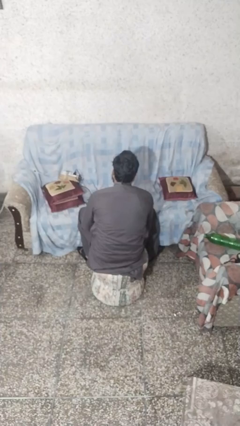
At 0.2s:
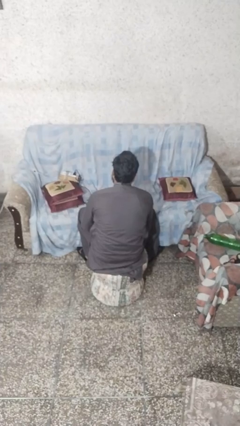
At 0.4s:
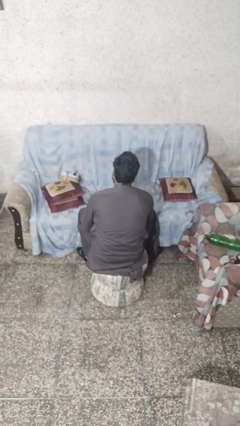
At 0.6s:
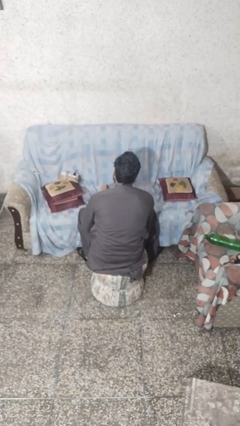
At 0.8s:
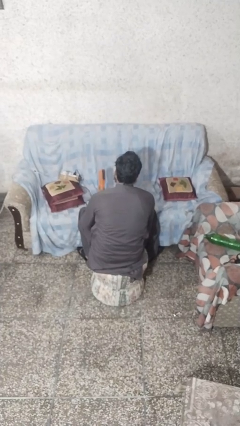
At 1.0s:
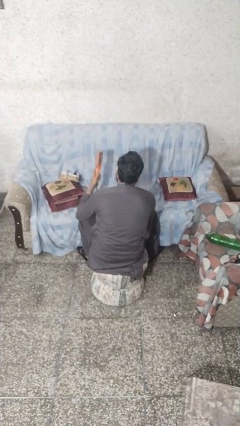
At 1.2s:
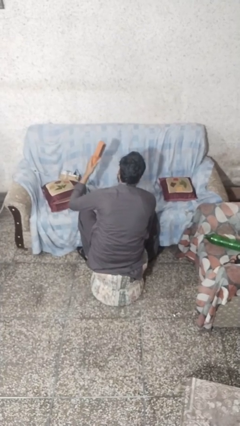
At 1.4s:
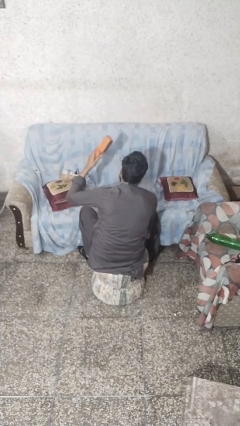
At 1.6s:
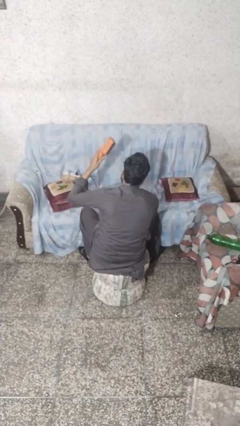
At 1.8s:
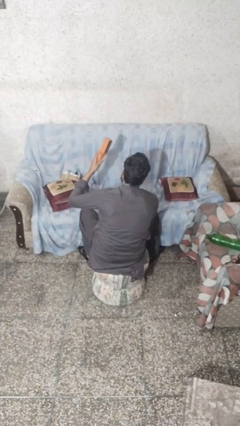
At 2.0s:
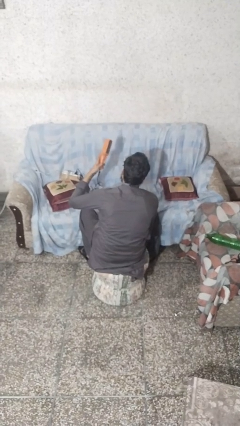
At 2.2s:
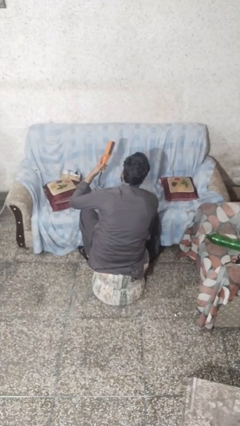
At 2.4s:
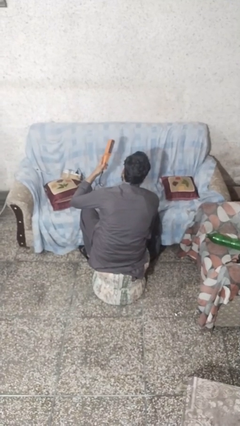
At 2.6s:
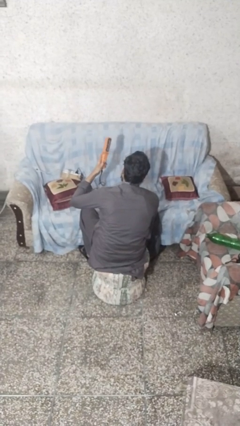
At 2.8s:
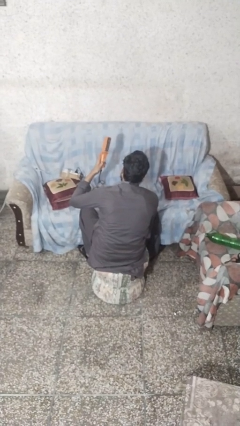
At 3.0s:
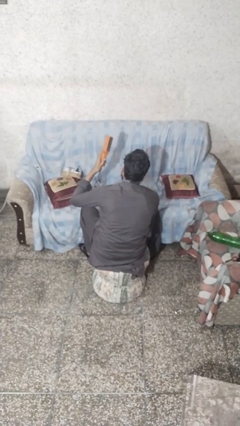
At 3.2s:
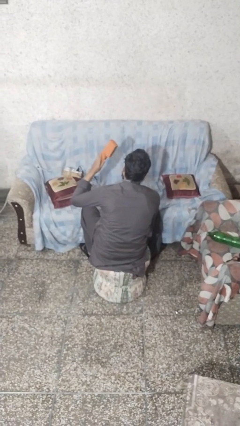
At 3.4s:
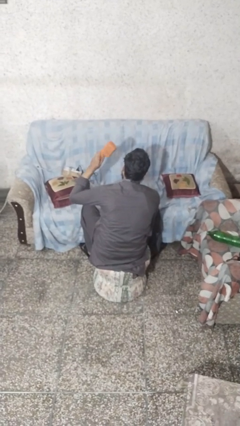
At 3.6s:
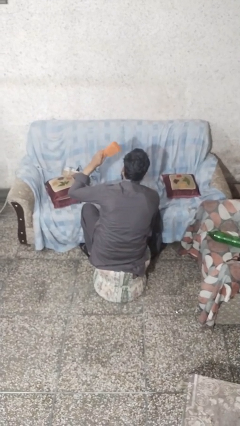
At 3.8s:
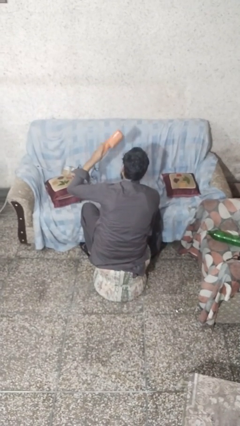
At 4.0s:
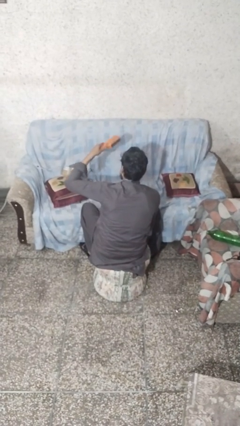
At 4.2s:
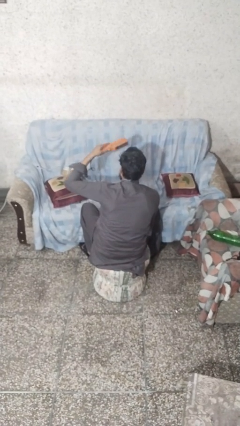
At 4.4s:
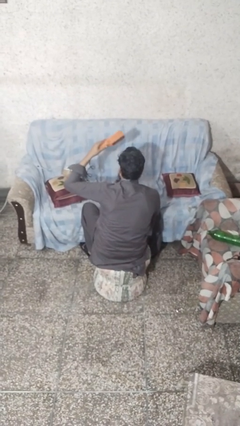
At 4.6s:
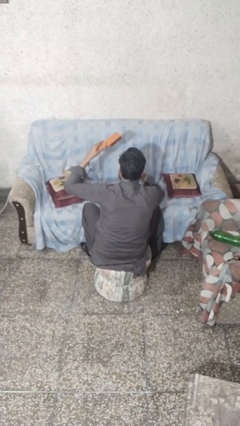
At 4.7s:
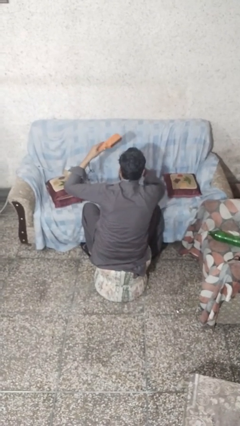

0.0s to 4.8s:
person dries hair with hairdryer

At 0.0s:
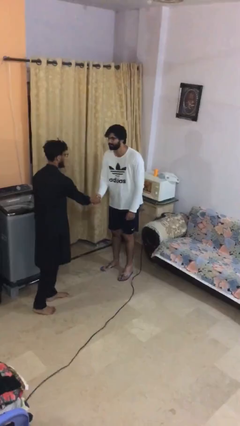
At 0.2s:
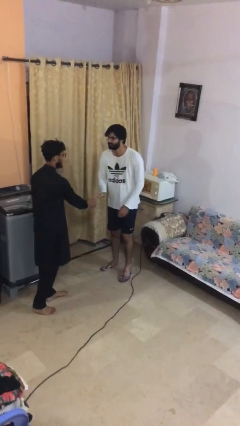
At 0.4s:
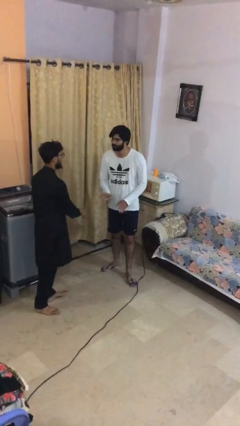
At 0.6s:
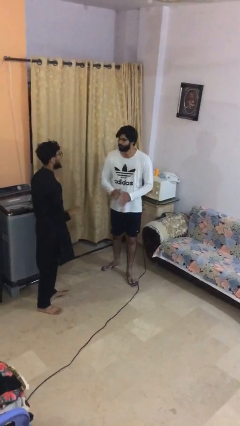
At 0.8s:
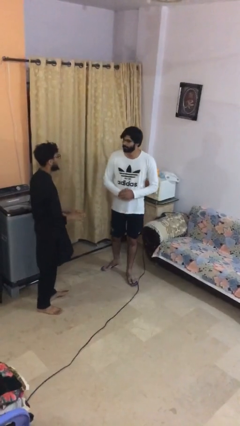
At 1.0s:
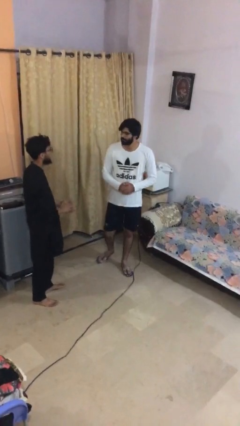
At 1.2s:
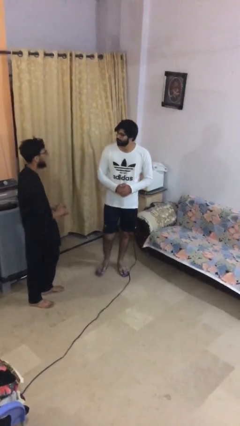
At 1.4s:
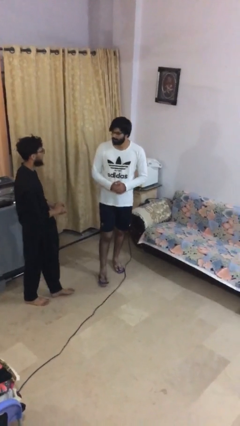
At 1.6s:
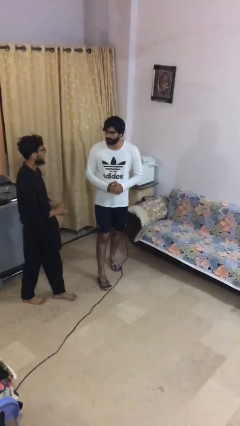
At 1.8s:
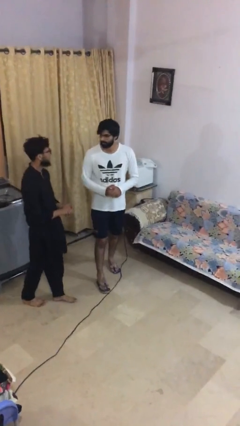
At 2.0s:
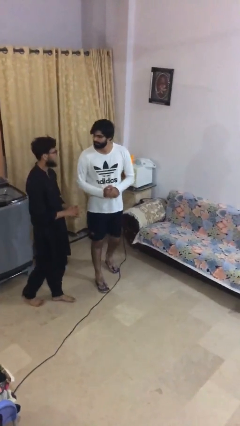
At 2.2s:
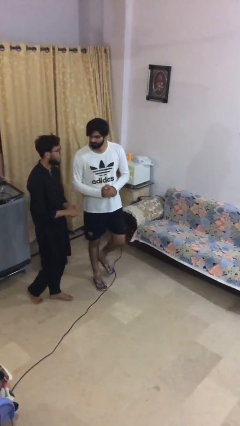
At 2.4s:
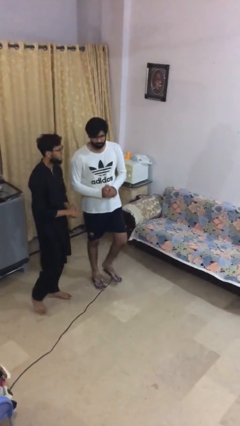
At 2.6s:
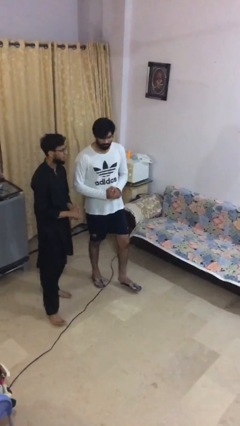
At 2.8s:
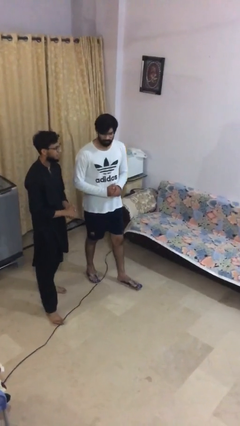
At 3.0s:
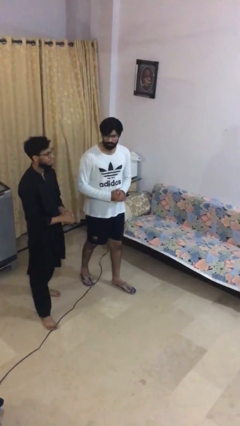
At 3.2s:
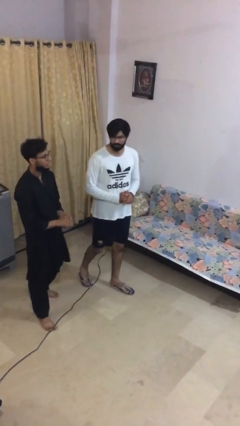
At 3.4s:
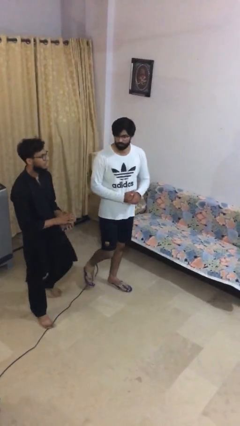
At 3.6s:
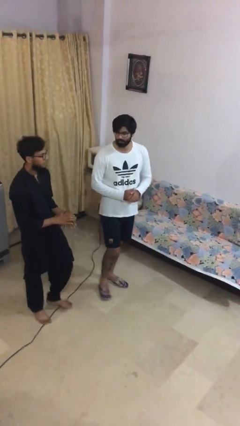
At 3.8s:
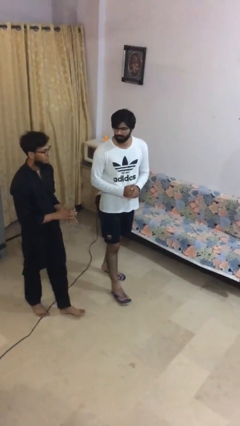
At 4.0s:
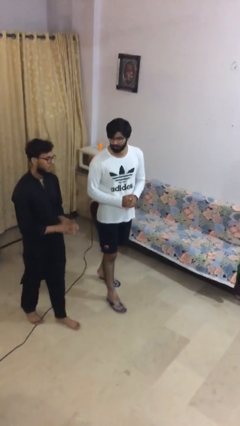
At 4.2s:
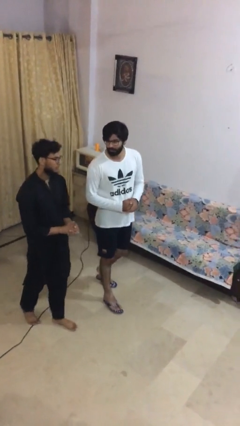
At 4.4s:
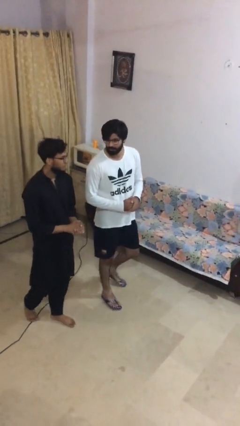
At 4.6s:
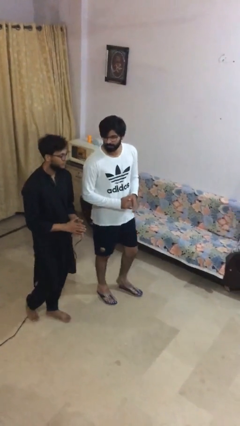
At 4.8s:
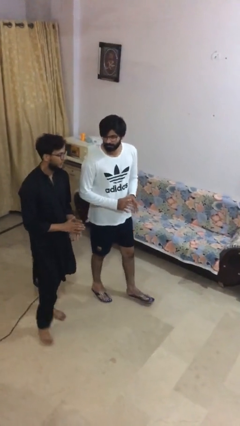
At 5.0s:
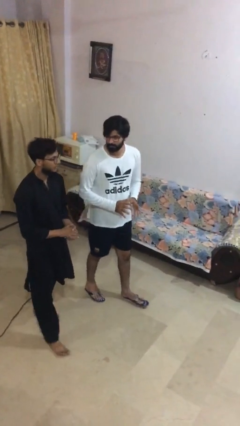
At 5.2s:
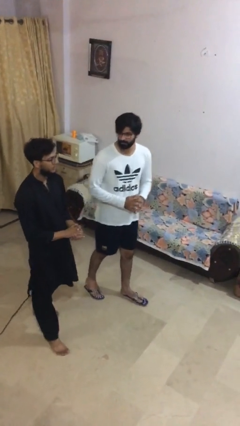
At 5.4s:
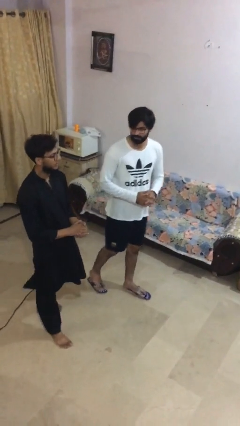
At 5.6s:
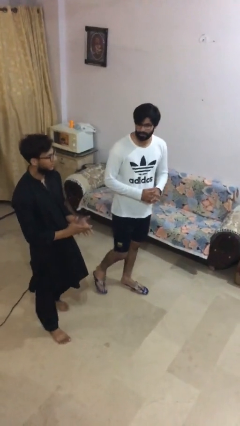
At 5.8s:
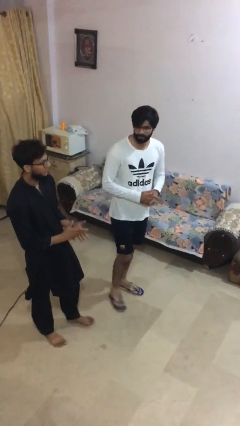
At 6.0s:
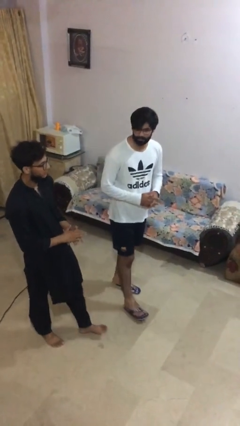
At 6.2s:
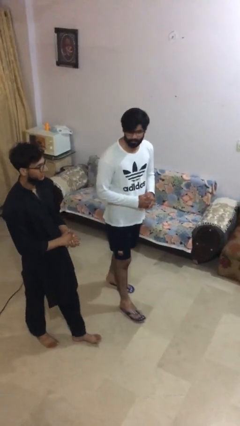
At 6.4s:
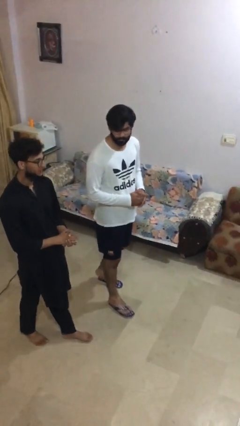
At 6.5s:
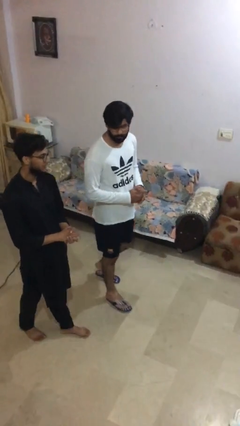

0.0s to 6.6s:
person talks to person

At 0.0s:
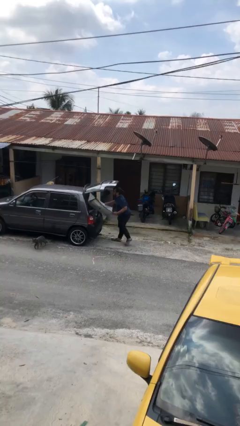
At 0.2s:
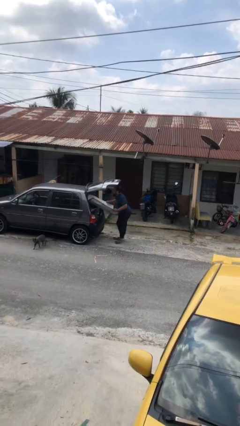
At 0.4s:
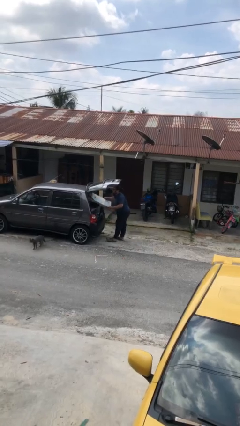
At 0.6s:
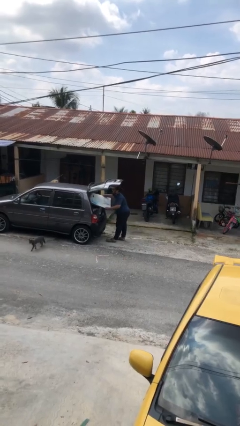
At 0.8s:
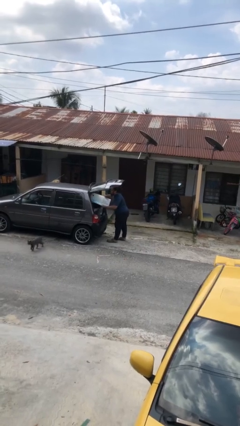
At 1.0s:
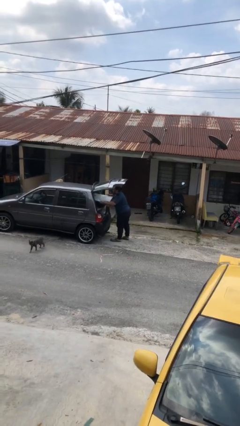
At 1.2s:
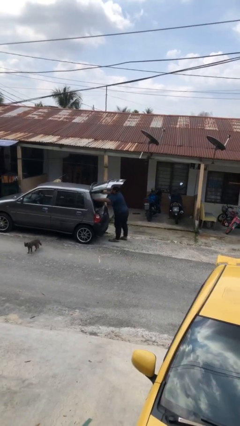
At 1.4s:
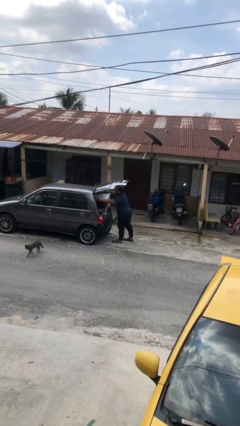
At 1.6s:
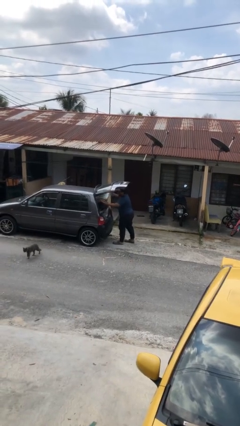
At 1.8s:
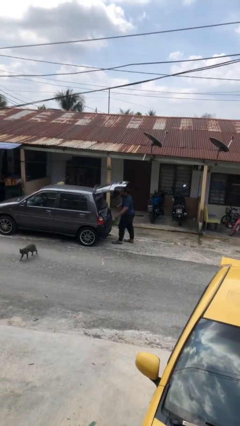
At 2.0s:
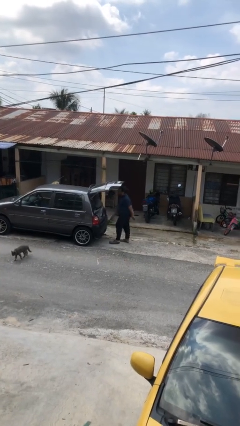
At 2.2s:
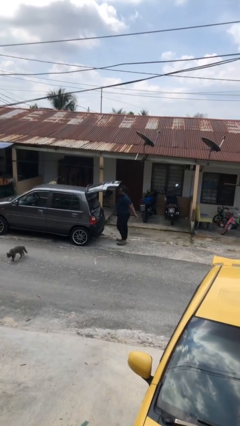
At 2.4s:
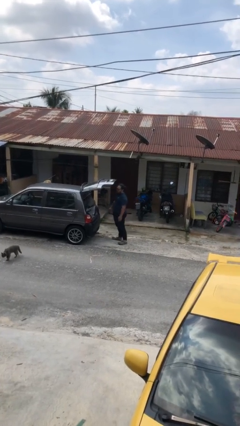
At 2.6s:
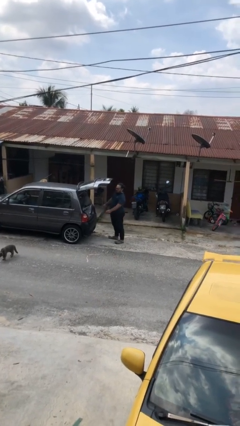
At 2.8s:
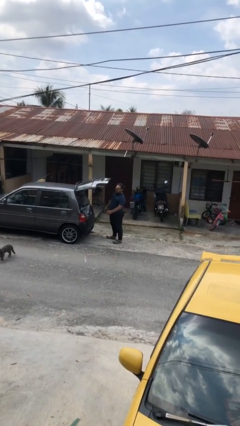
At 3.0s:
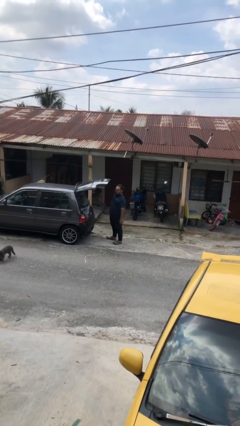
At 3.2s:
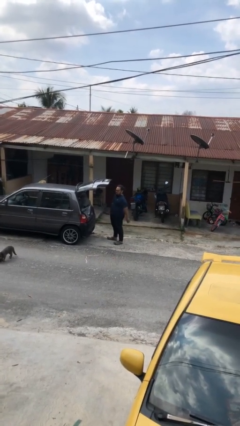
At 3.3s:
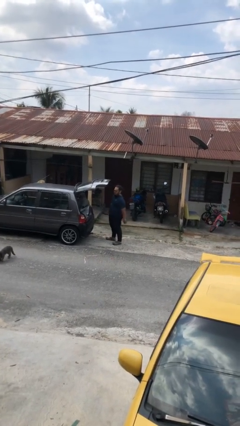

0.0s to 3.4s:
person loads car

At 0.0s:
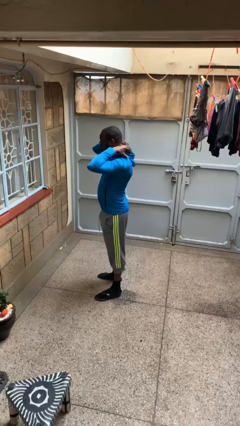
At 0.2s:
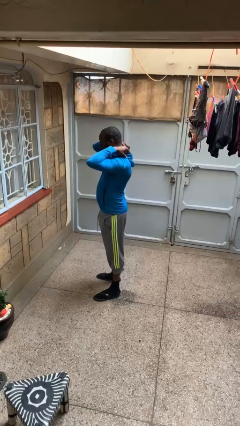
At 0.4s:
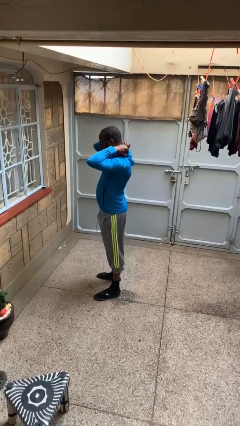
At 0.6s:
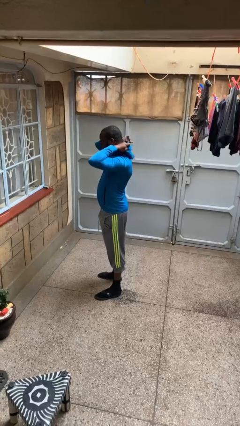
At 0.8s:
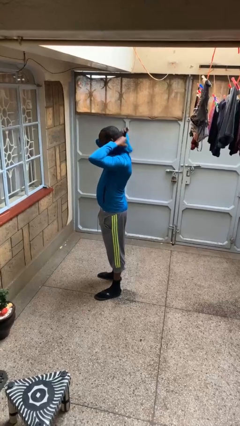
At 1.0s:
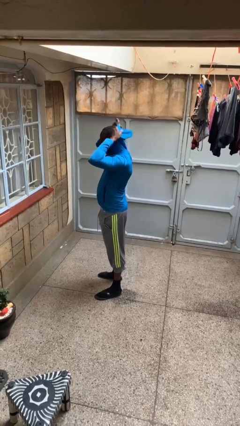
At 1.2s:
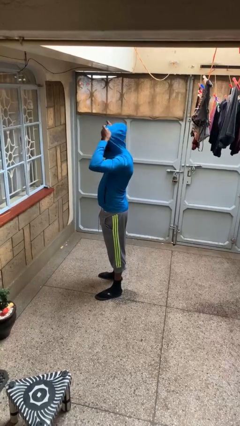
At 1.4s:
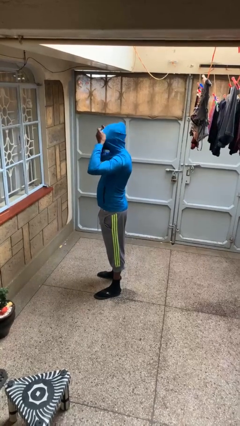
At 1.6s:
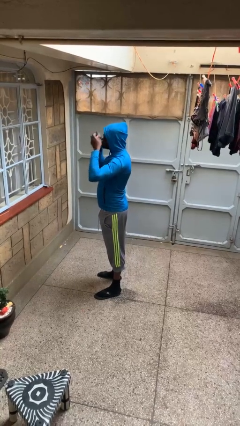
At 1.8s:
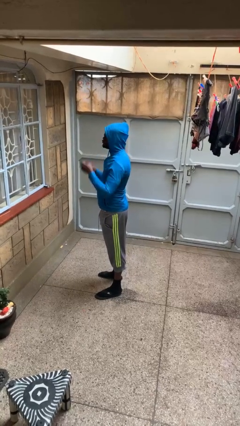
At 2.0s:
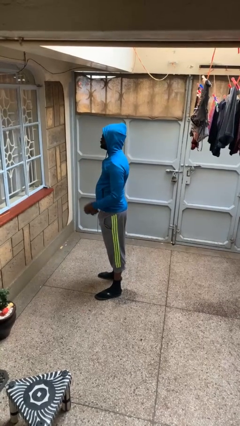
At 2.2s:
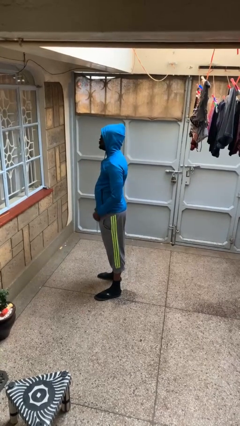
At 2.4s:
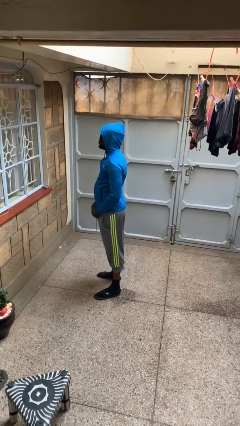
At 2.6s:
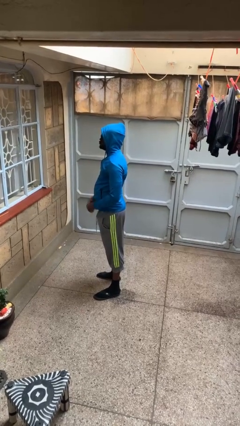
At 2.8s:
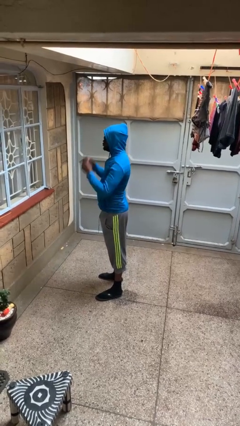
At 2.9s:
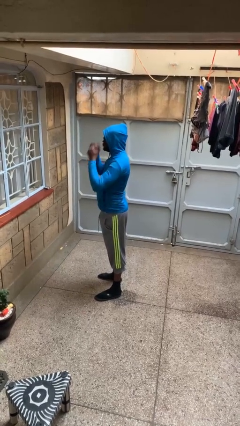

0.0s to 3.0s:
person puts on hoodie
